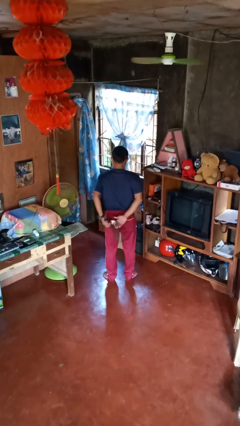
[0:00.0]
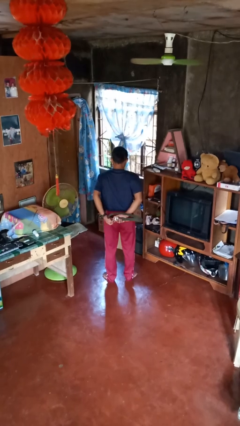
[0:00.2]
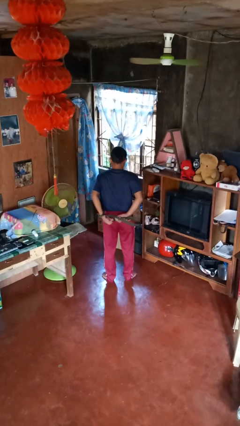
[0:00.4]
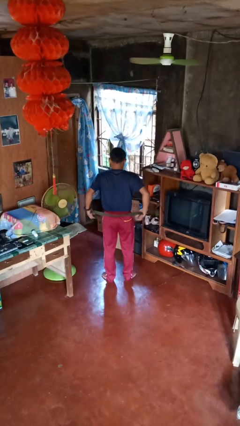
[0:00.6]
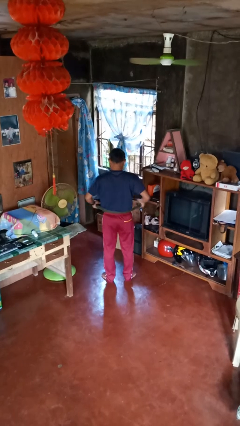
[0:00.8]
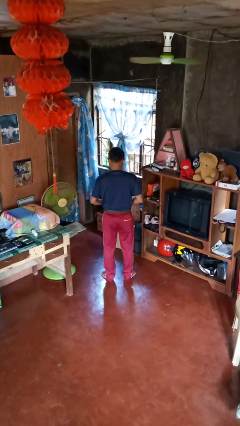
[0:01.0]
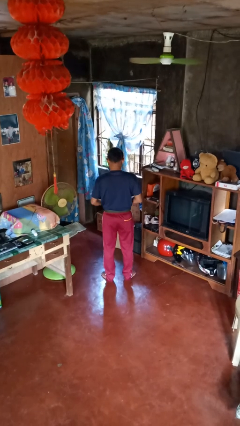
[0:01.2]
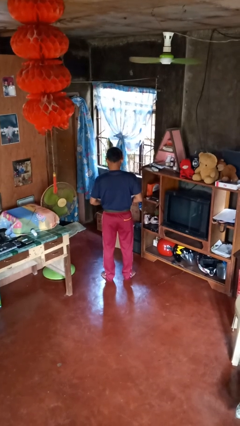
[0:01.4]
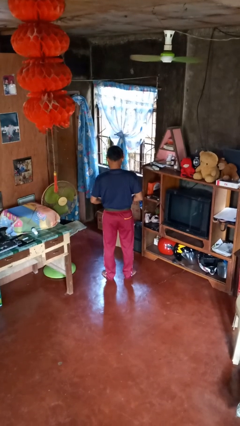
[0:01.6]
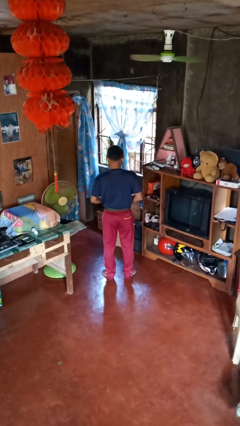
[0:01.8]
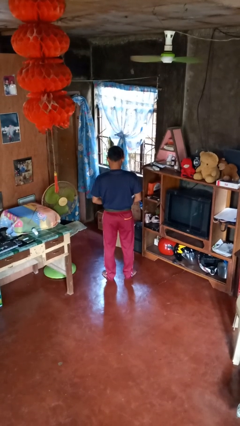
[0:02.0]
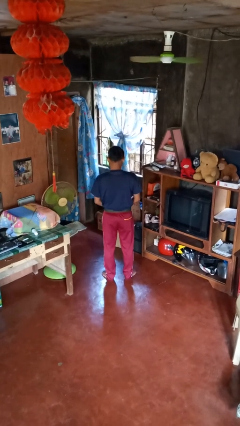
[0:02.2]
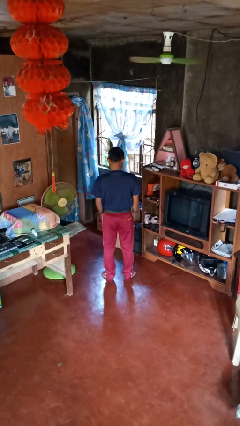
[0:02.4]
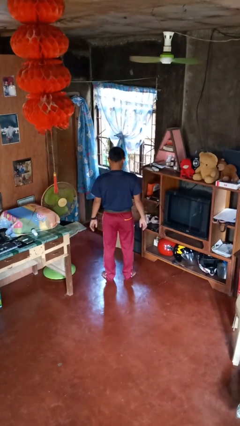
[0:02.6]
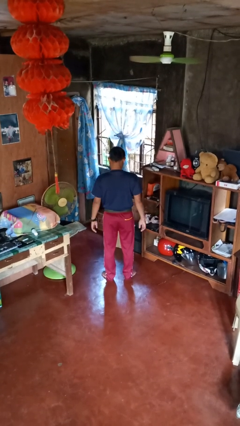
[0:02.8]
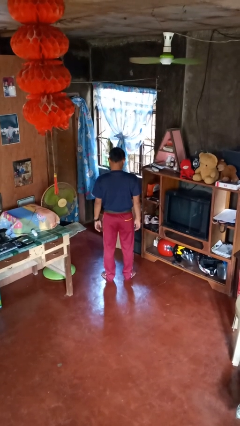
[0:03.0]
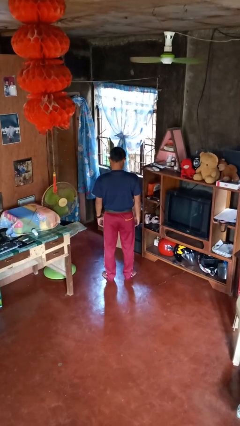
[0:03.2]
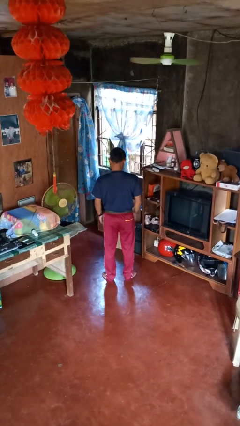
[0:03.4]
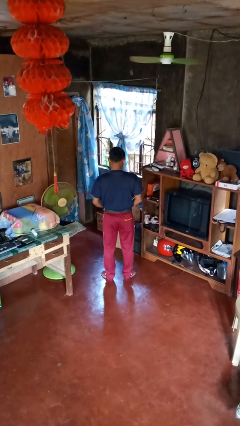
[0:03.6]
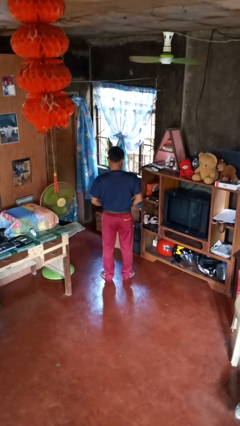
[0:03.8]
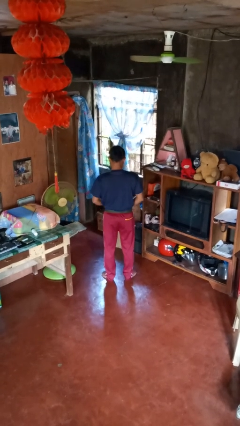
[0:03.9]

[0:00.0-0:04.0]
person puts on belt

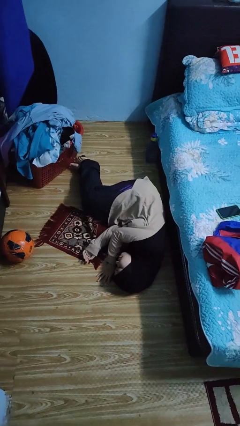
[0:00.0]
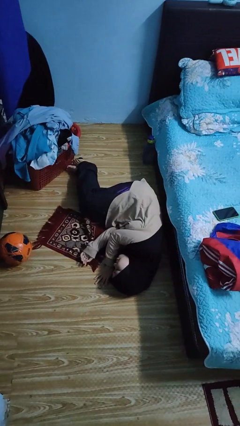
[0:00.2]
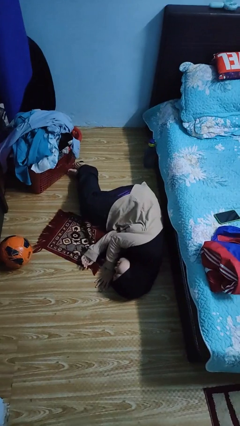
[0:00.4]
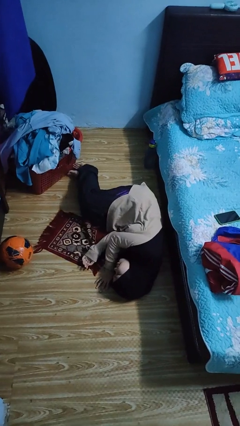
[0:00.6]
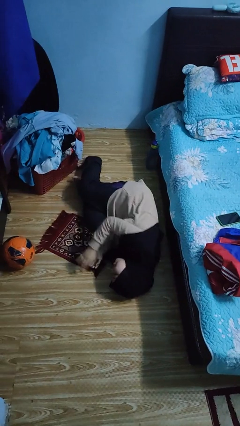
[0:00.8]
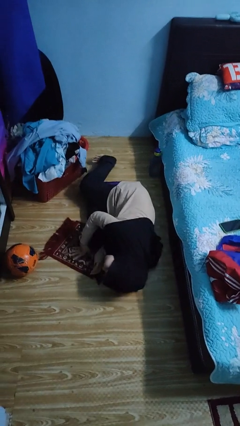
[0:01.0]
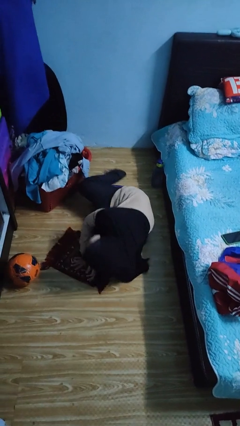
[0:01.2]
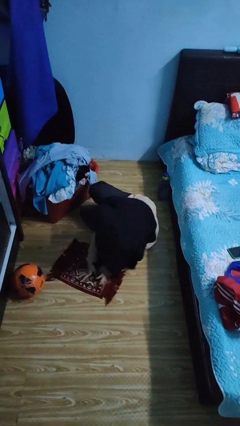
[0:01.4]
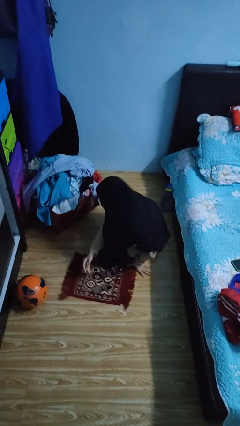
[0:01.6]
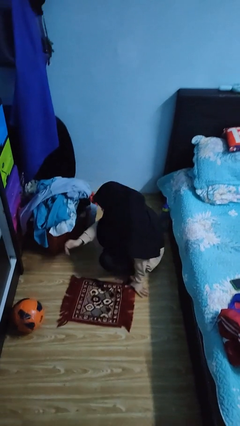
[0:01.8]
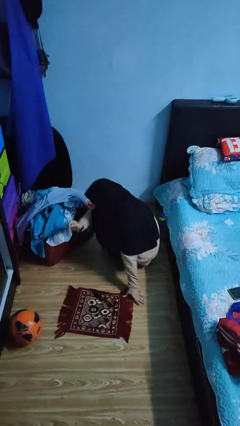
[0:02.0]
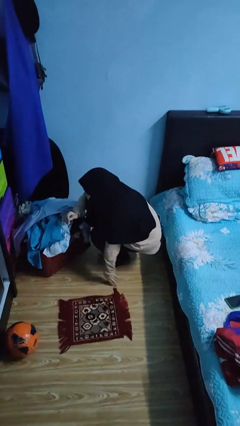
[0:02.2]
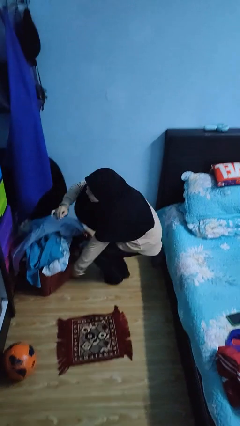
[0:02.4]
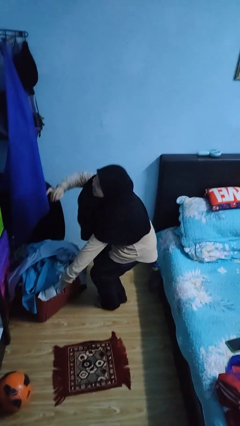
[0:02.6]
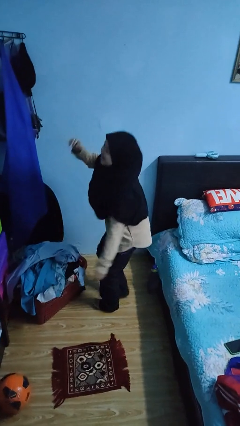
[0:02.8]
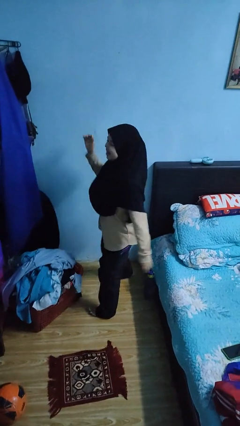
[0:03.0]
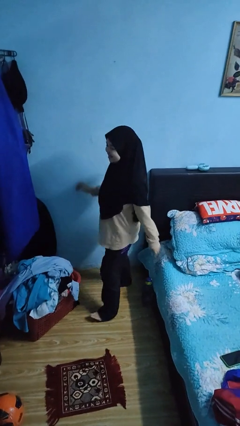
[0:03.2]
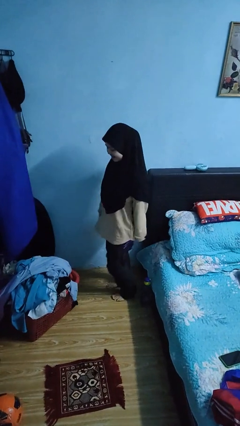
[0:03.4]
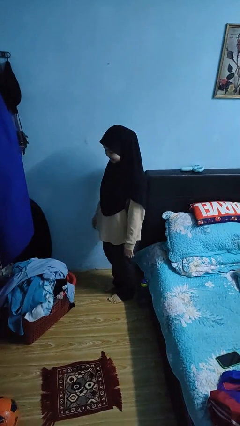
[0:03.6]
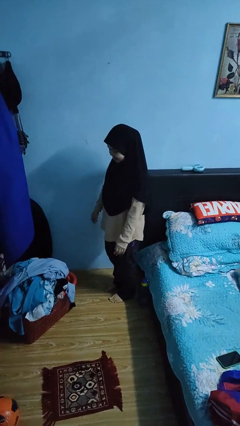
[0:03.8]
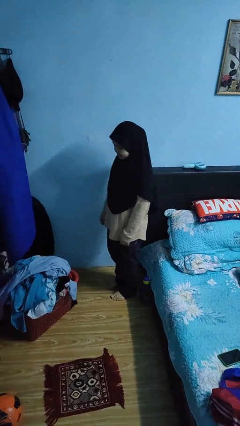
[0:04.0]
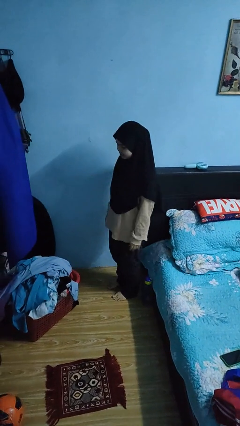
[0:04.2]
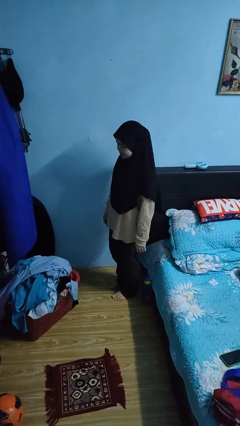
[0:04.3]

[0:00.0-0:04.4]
person stands up from floor

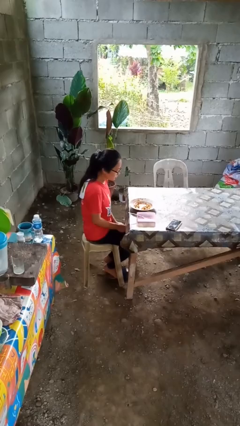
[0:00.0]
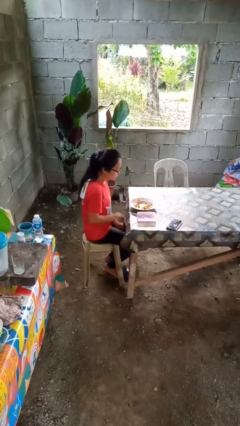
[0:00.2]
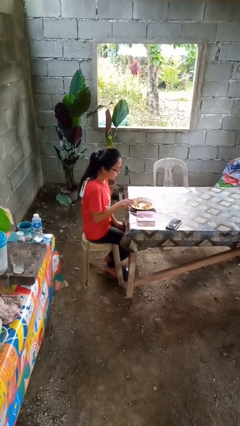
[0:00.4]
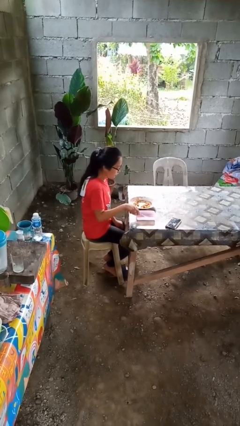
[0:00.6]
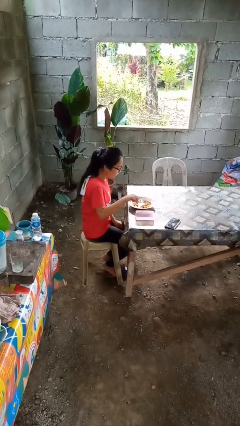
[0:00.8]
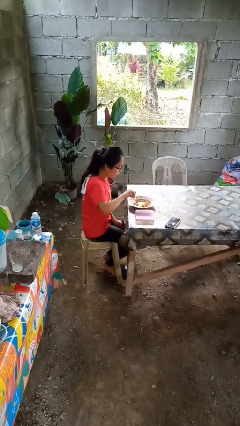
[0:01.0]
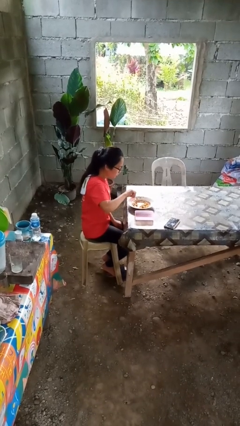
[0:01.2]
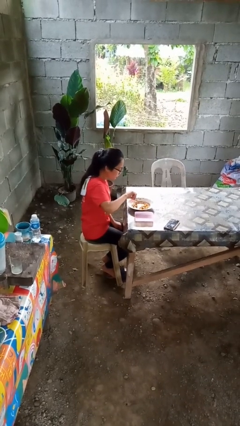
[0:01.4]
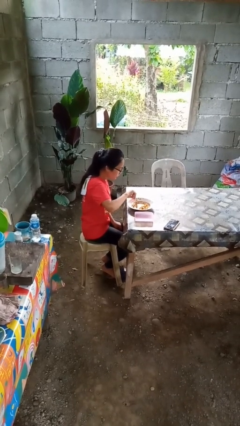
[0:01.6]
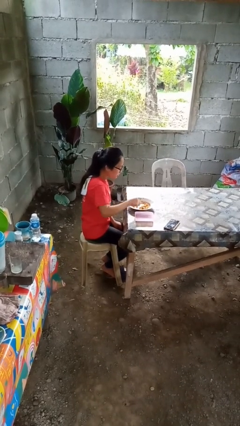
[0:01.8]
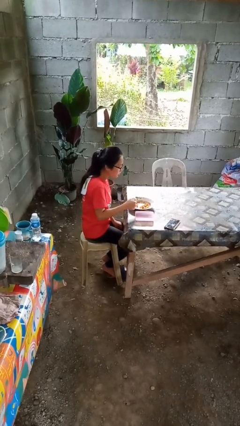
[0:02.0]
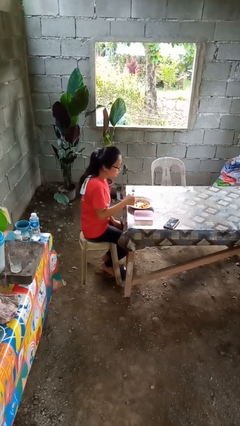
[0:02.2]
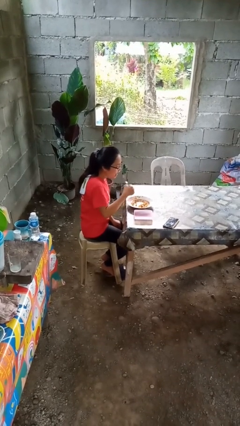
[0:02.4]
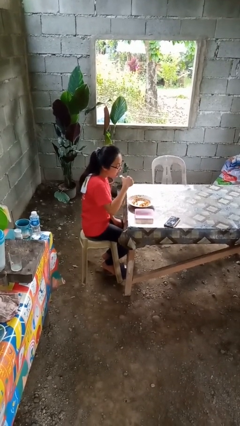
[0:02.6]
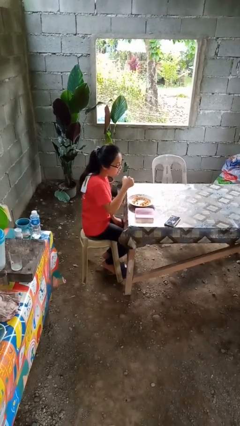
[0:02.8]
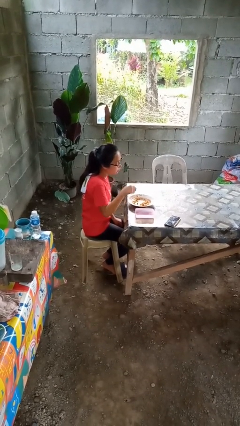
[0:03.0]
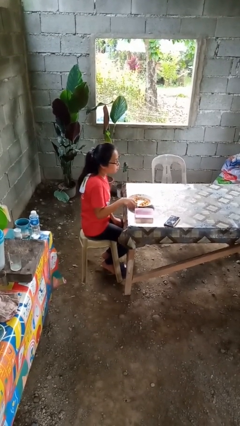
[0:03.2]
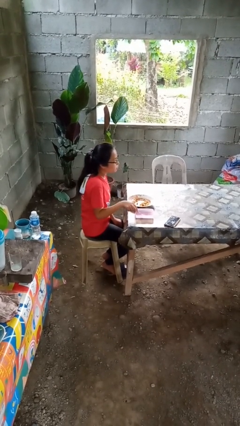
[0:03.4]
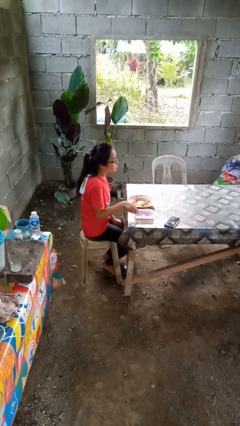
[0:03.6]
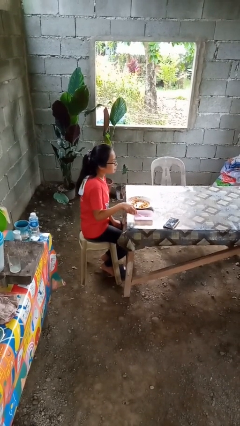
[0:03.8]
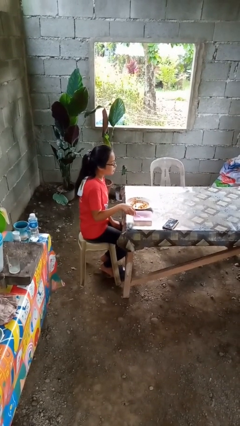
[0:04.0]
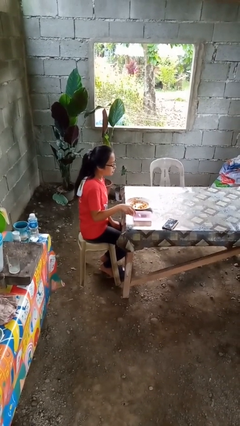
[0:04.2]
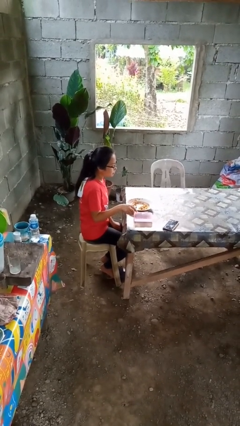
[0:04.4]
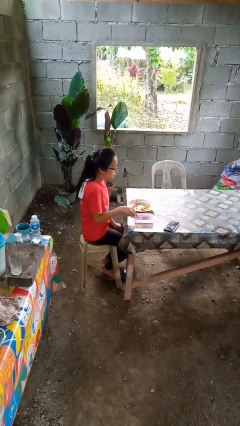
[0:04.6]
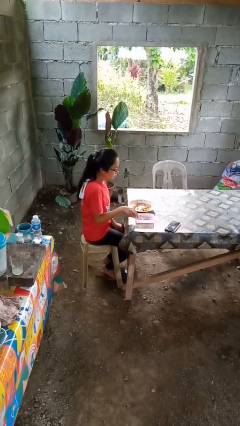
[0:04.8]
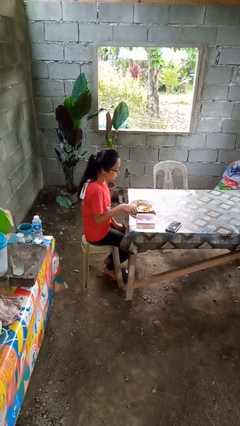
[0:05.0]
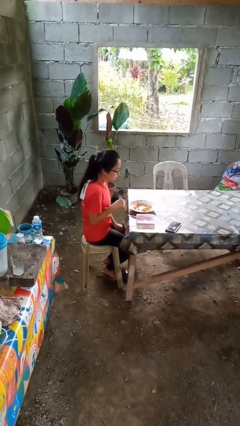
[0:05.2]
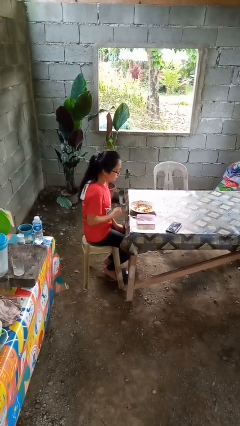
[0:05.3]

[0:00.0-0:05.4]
person eats with utensil

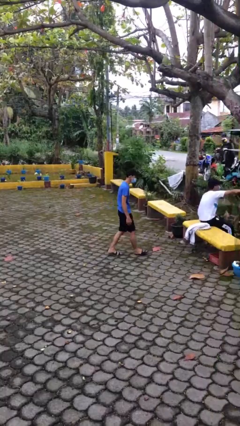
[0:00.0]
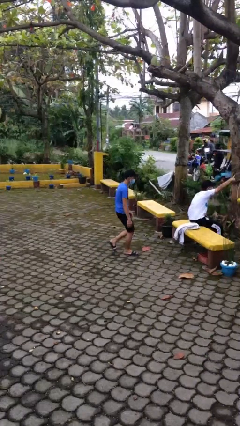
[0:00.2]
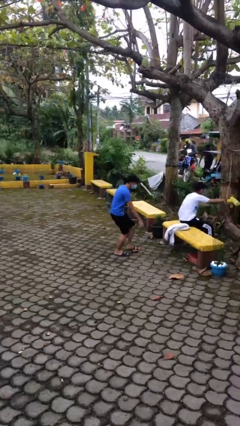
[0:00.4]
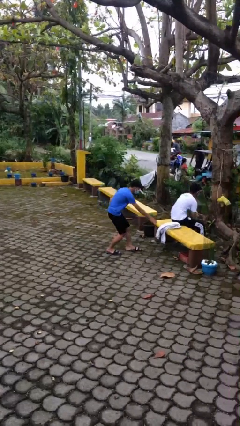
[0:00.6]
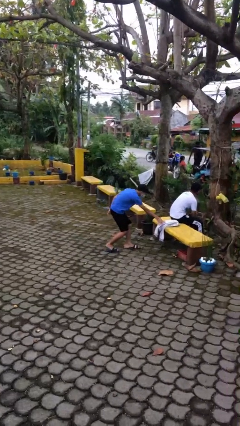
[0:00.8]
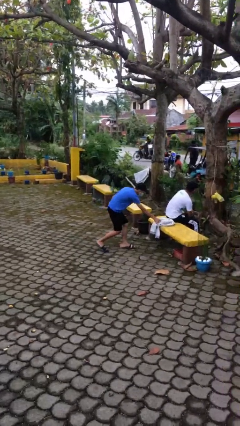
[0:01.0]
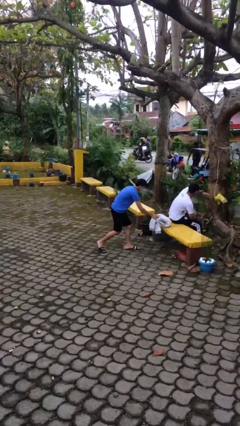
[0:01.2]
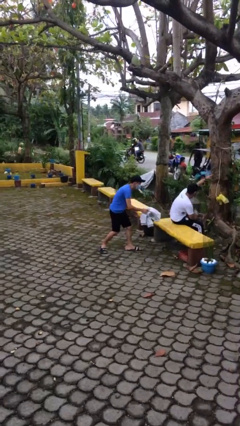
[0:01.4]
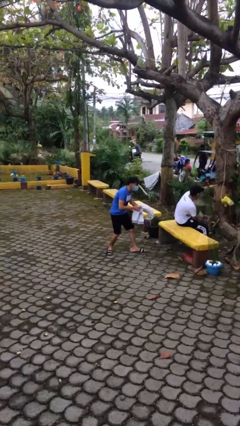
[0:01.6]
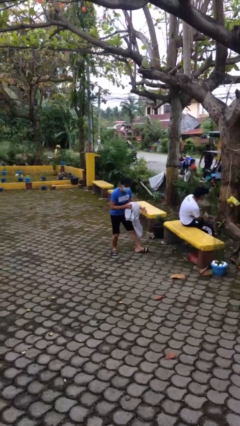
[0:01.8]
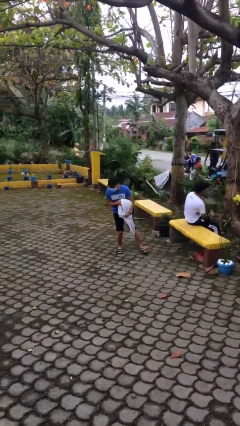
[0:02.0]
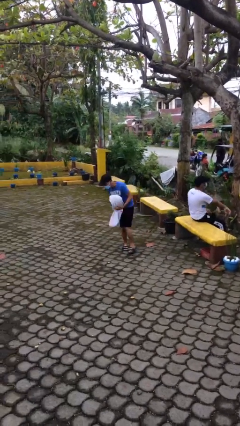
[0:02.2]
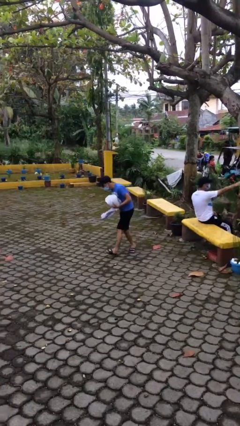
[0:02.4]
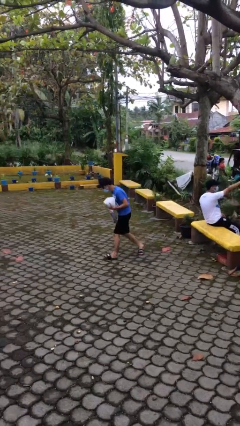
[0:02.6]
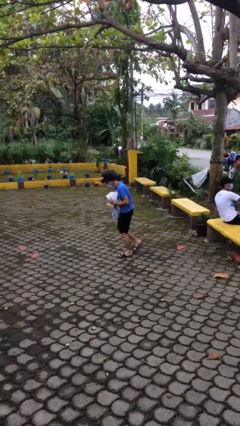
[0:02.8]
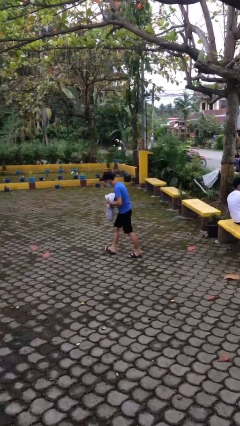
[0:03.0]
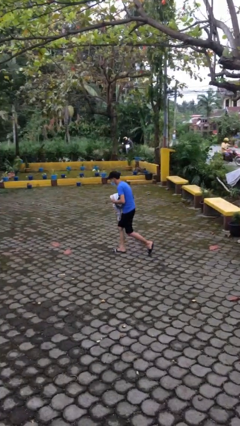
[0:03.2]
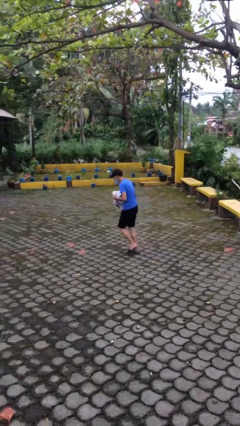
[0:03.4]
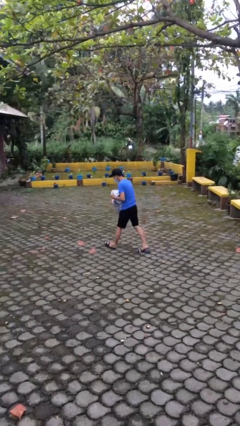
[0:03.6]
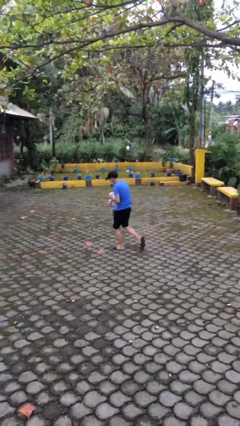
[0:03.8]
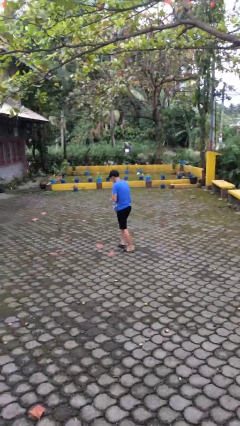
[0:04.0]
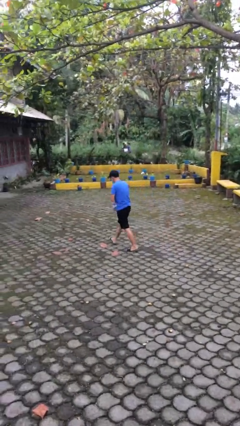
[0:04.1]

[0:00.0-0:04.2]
person steals object from person
